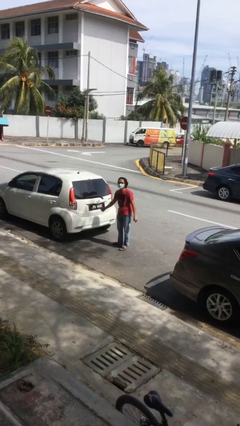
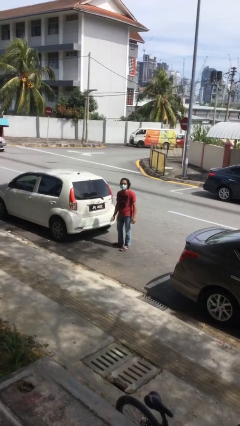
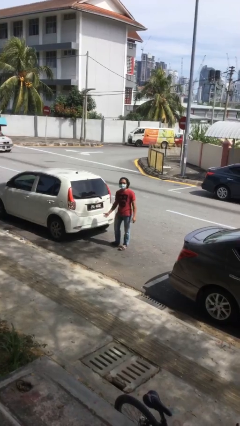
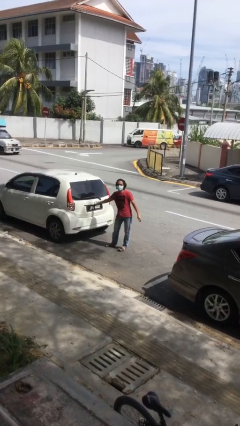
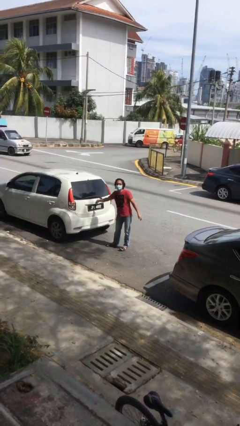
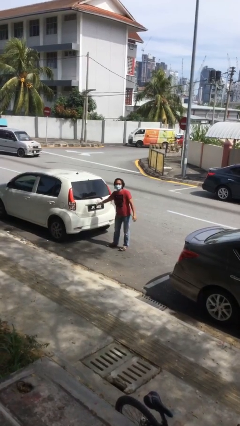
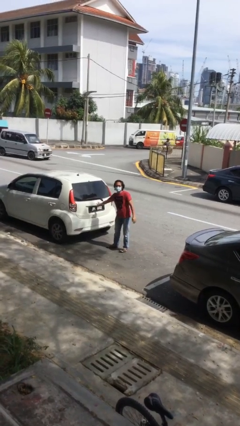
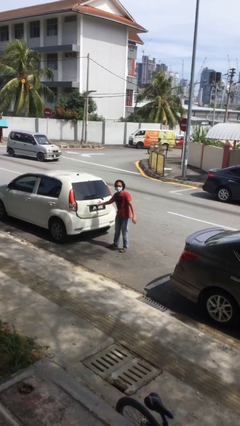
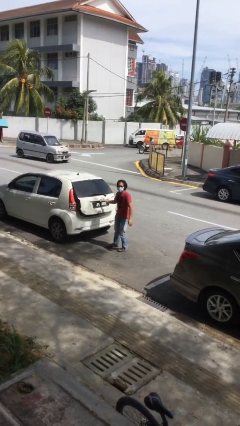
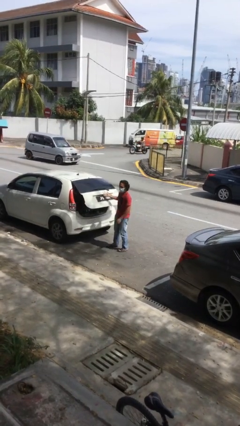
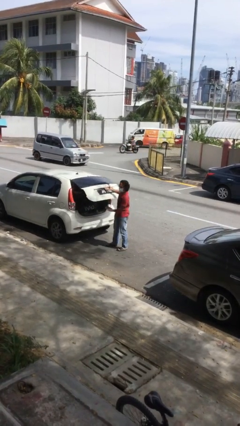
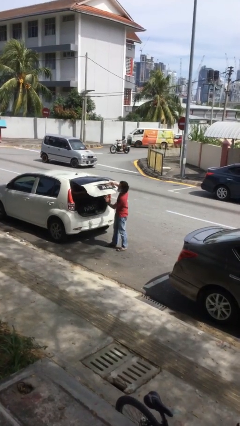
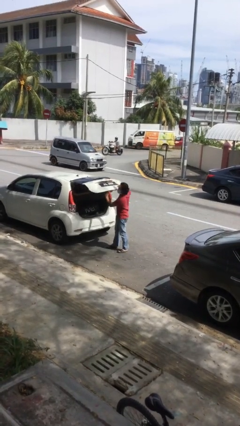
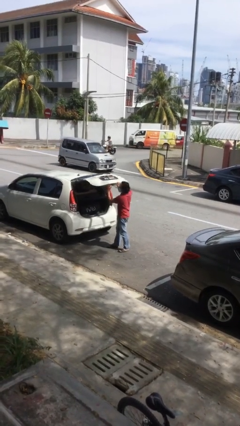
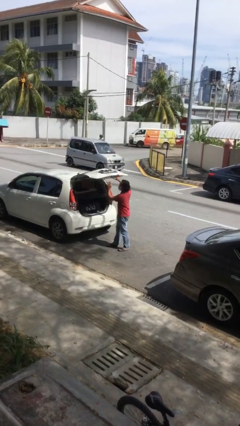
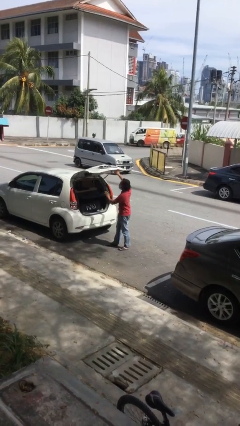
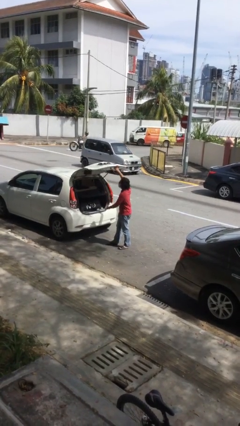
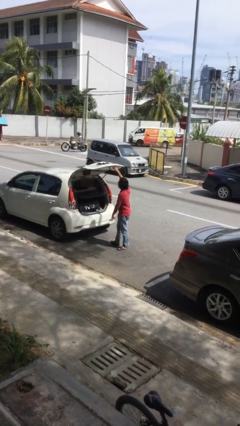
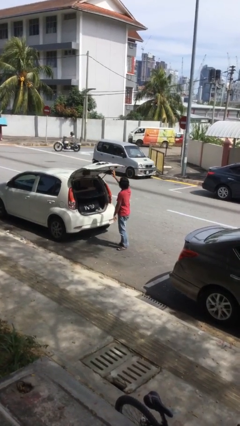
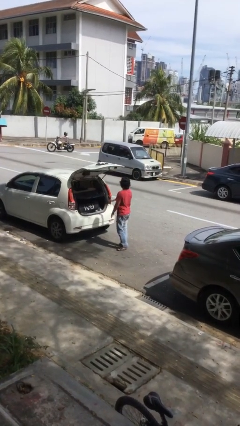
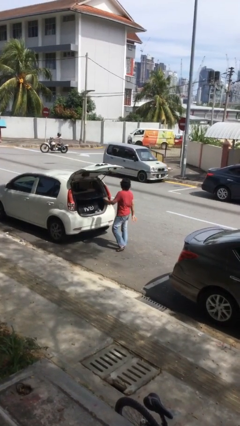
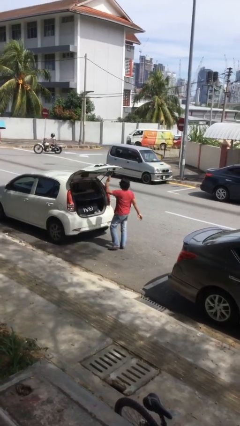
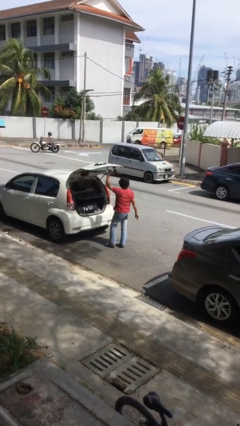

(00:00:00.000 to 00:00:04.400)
person opens car trunk

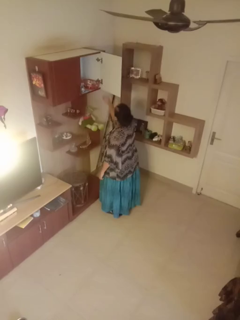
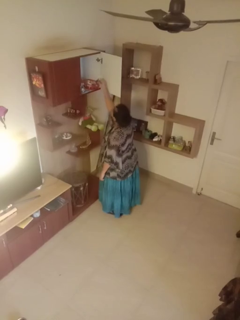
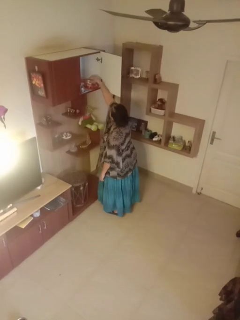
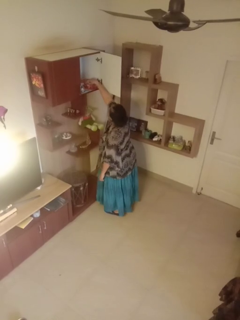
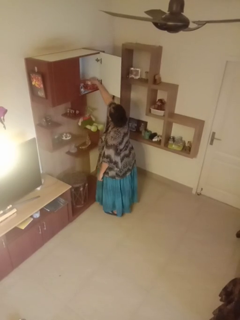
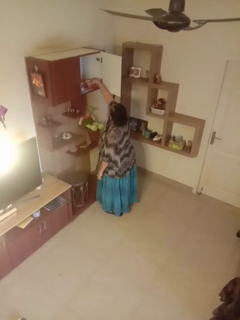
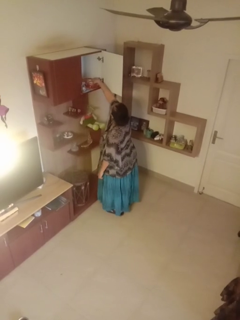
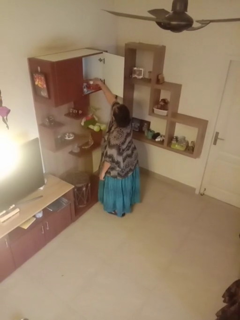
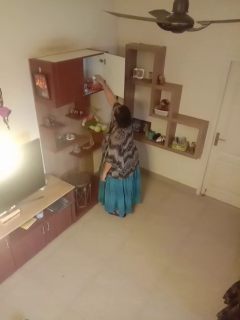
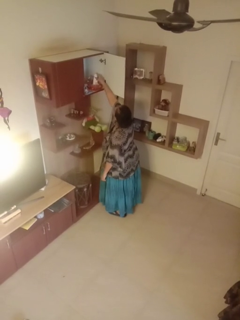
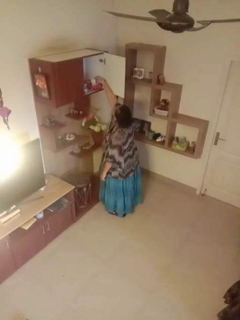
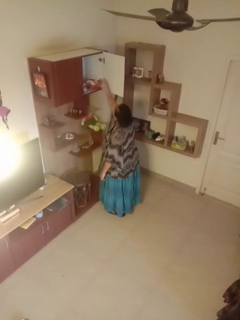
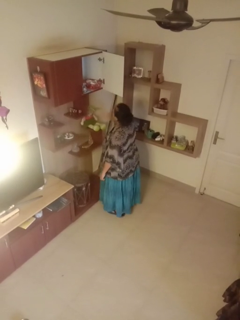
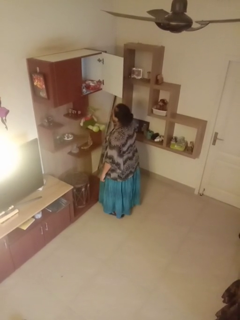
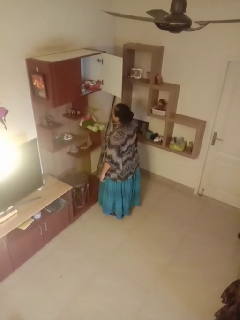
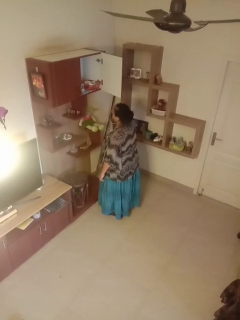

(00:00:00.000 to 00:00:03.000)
person searches in cabinet

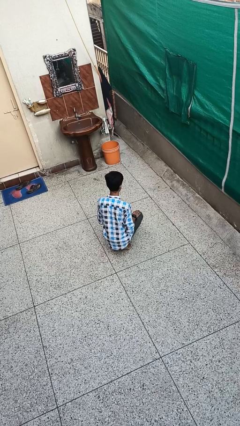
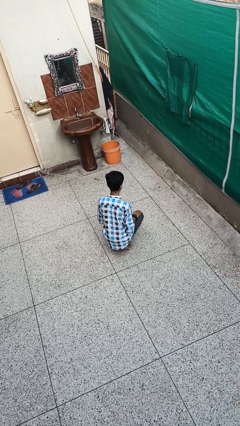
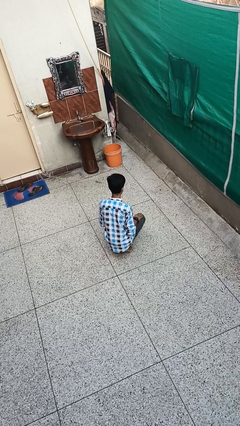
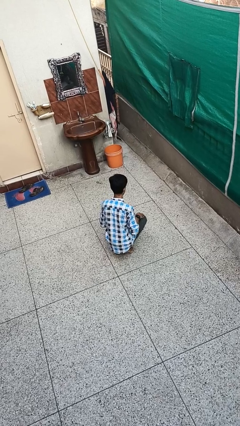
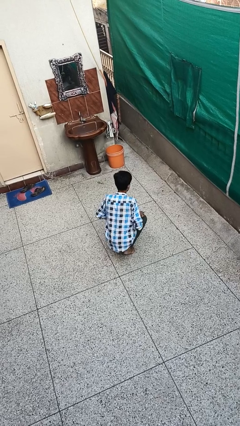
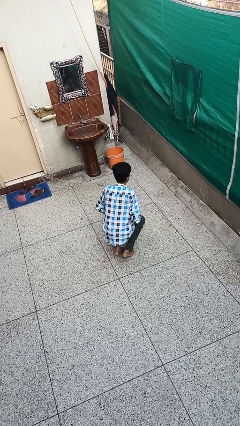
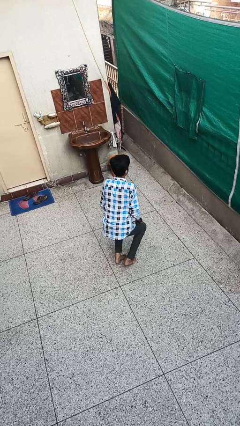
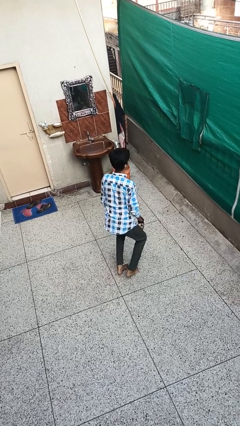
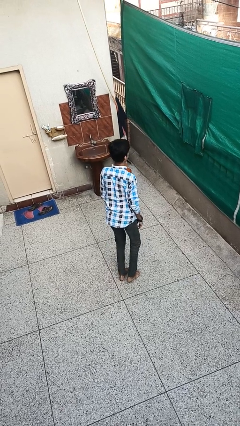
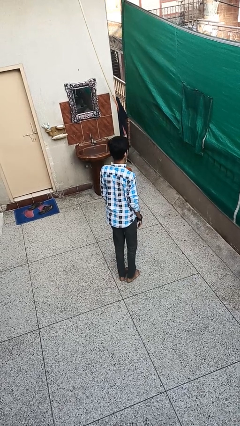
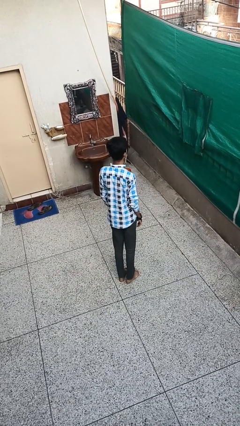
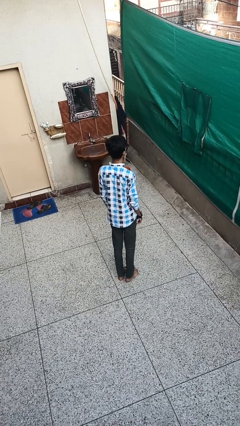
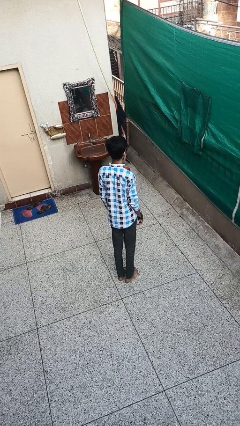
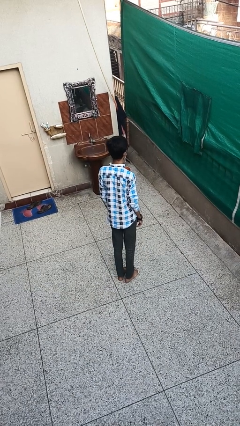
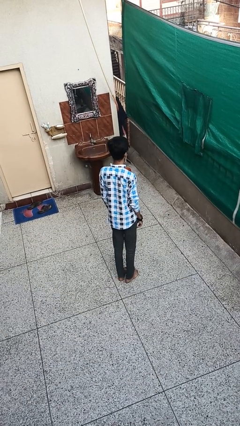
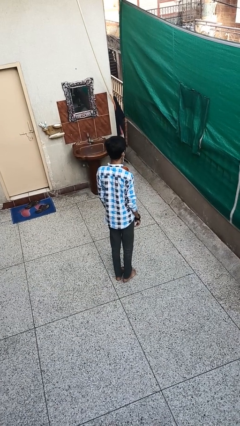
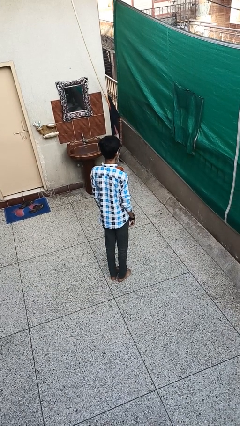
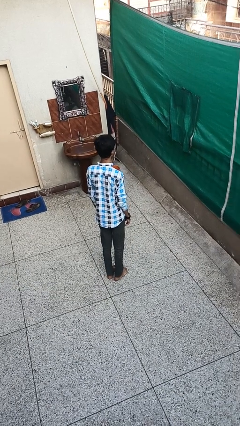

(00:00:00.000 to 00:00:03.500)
person stands up

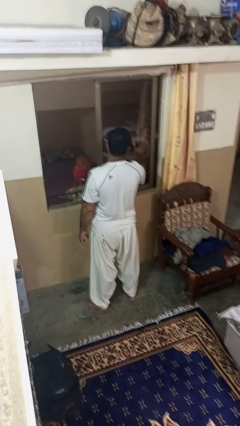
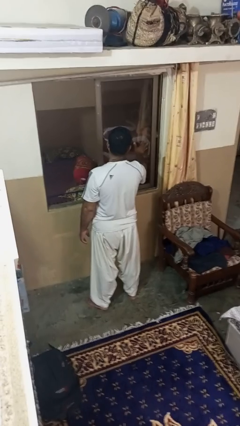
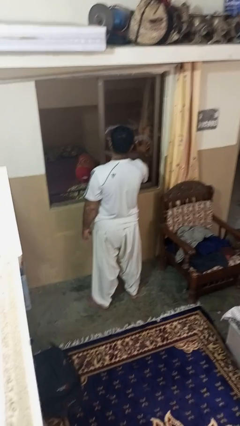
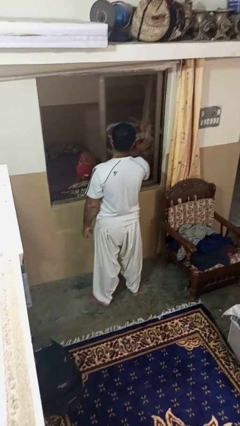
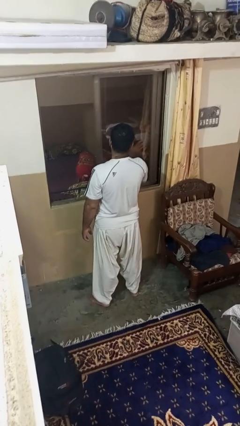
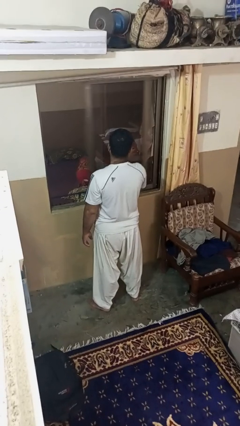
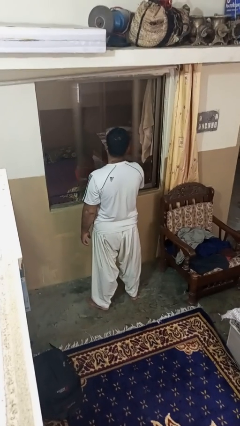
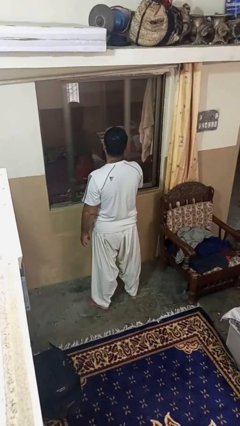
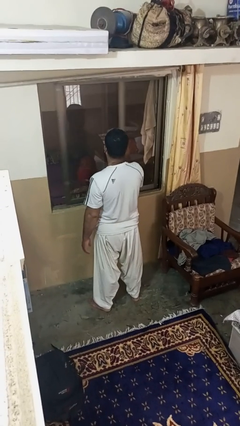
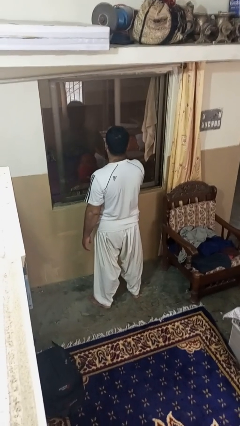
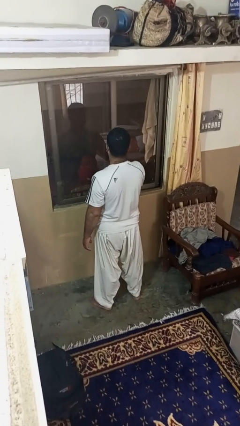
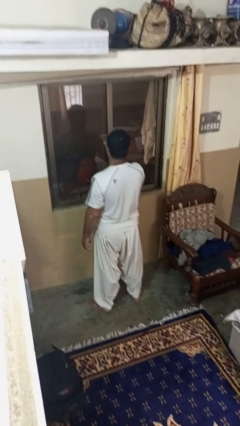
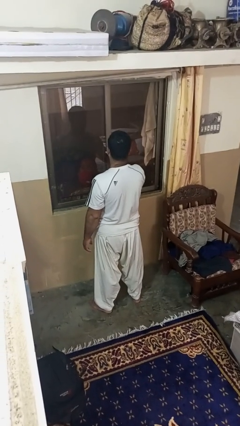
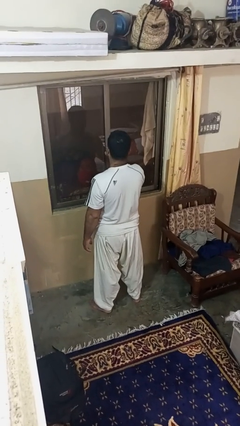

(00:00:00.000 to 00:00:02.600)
person closes home window

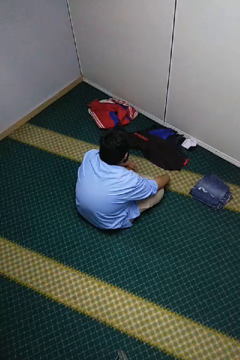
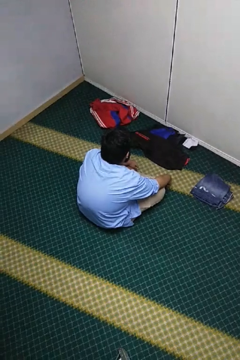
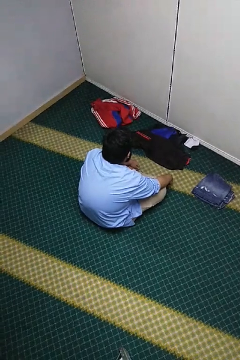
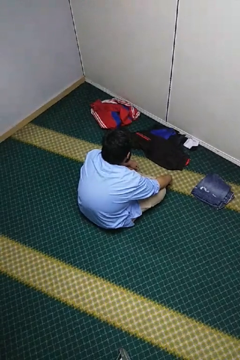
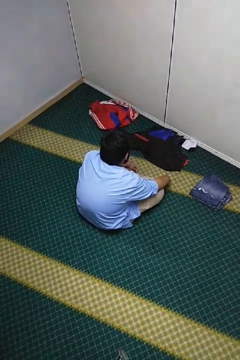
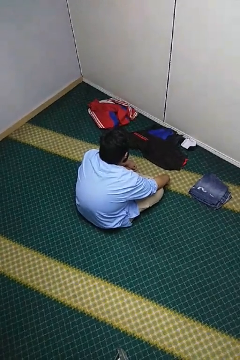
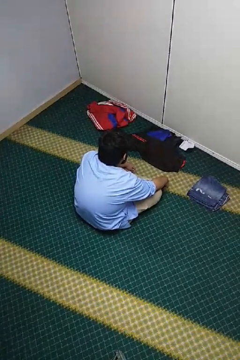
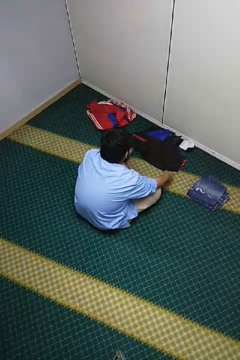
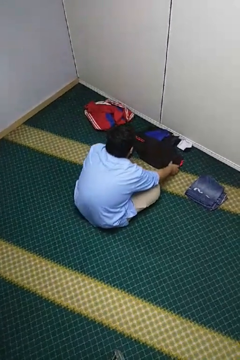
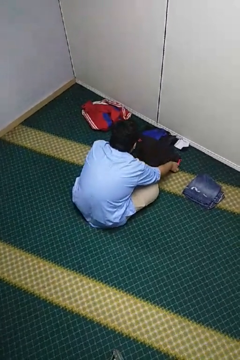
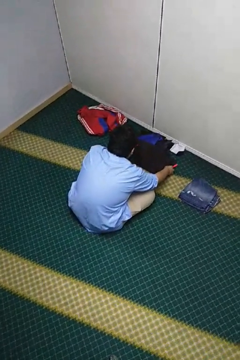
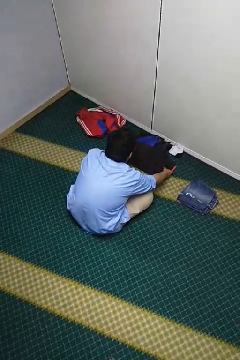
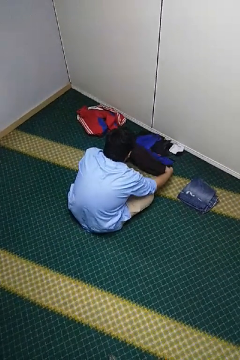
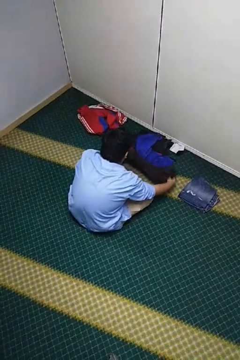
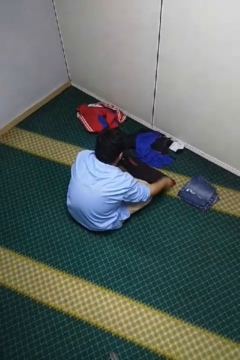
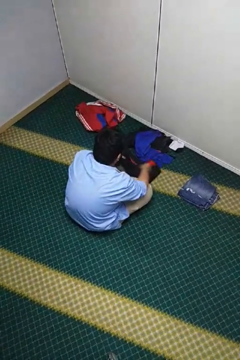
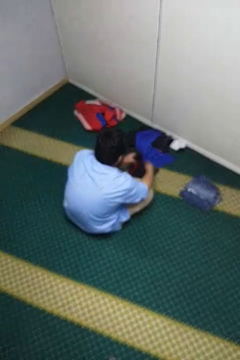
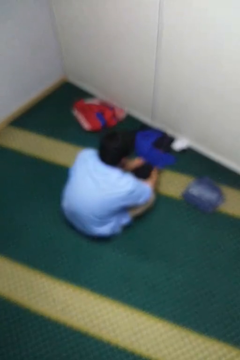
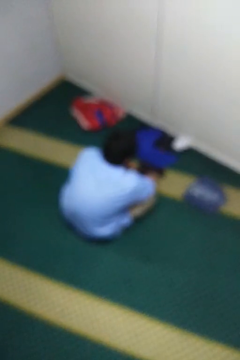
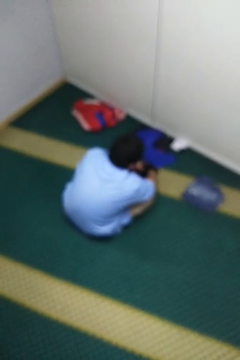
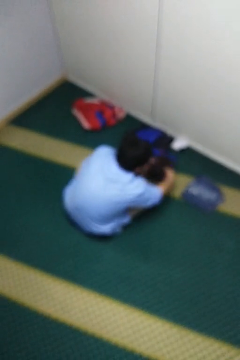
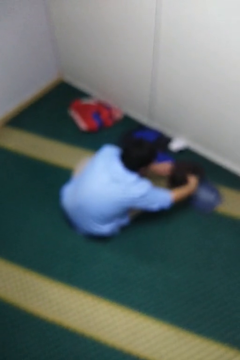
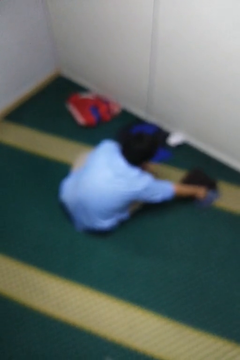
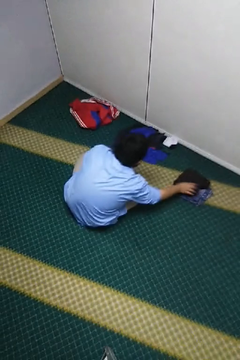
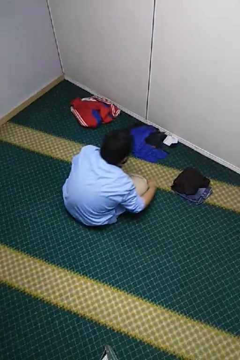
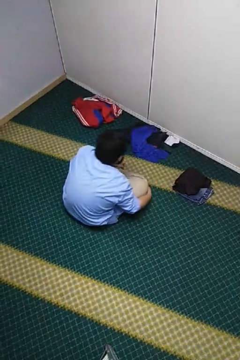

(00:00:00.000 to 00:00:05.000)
person folds shirt

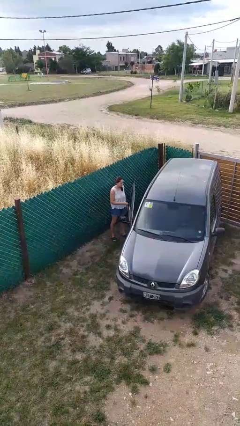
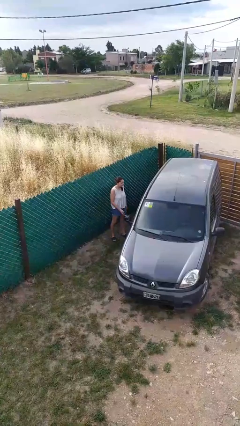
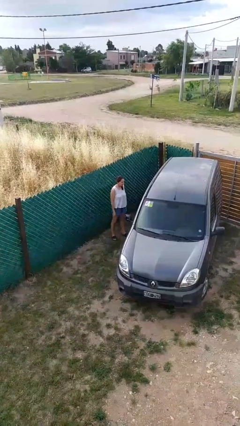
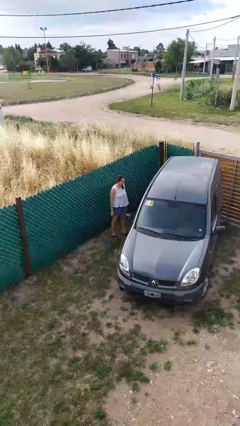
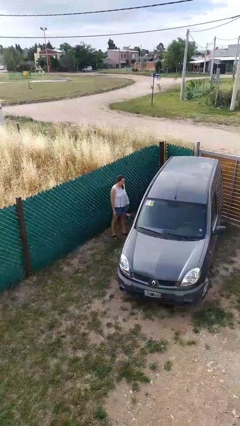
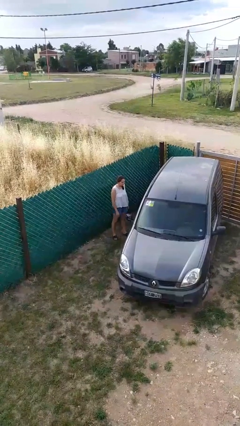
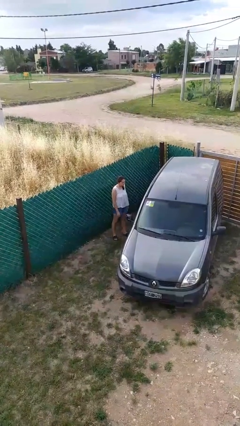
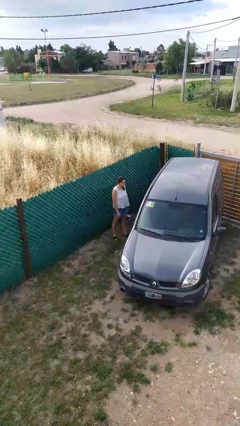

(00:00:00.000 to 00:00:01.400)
person closes car door
